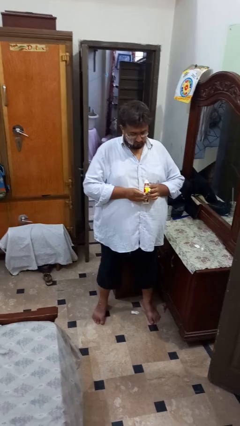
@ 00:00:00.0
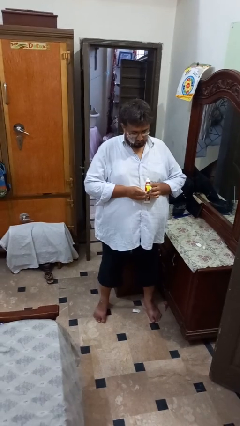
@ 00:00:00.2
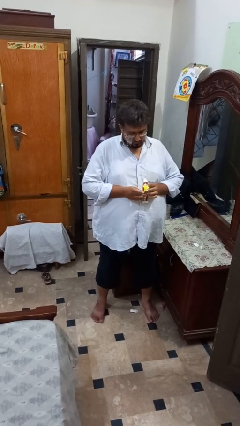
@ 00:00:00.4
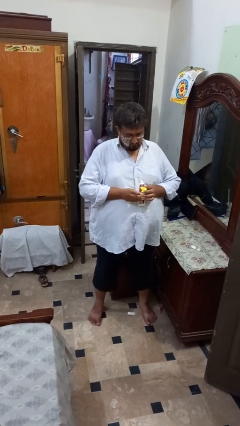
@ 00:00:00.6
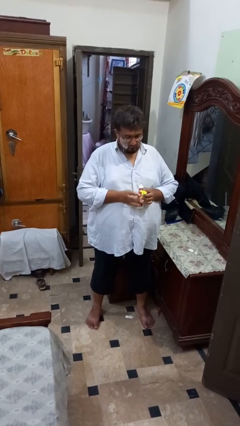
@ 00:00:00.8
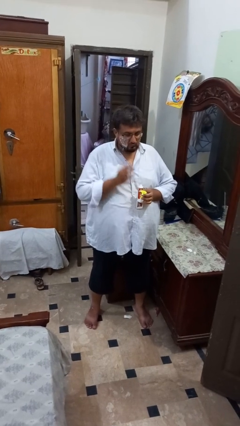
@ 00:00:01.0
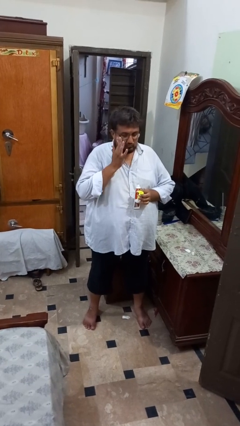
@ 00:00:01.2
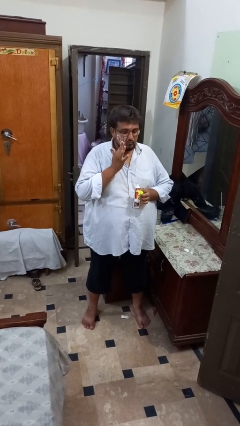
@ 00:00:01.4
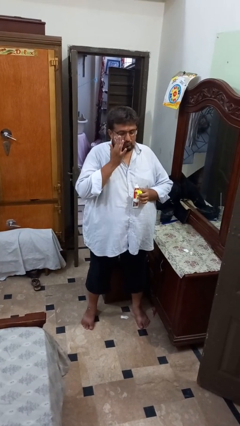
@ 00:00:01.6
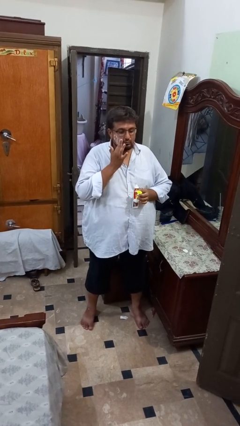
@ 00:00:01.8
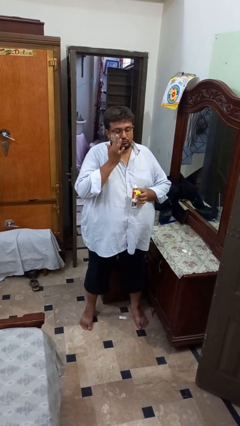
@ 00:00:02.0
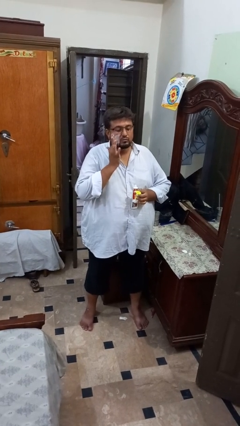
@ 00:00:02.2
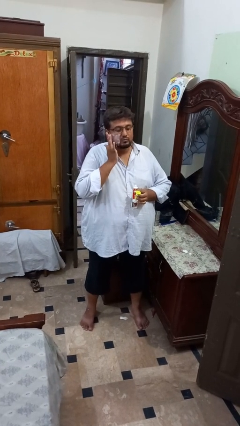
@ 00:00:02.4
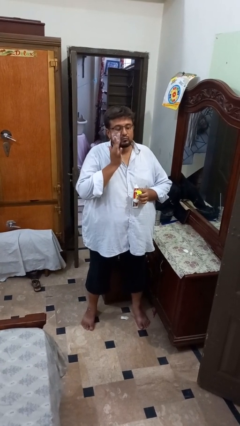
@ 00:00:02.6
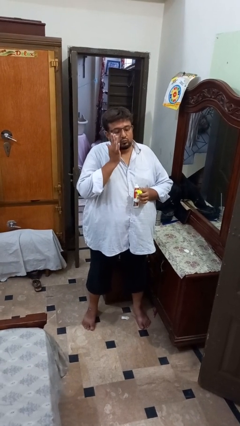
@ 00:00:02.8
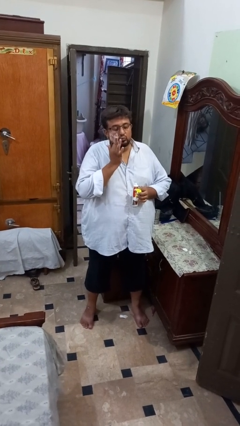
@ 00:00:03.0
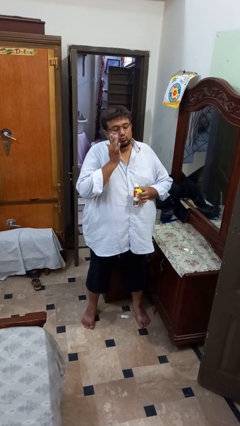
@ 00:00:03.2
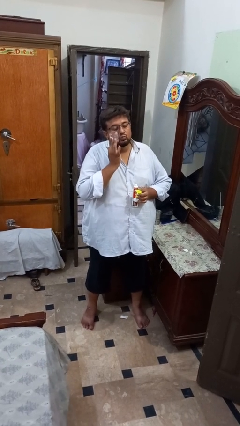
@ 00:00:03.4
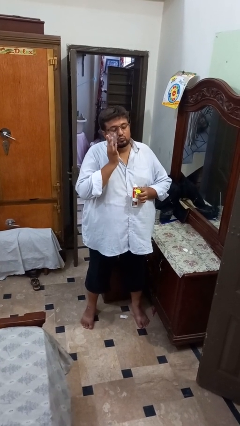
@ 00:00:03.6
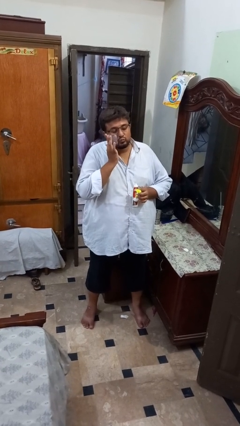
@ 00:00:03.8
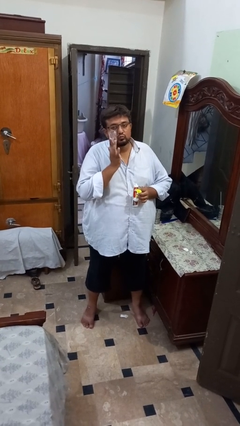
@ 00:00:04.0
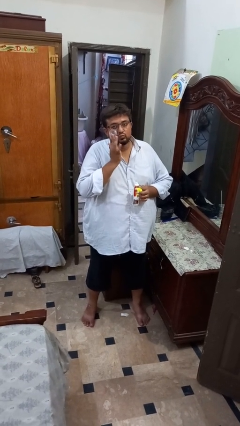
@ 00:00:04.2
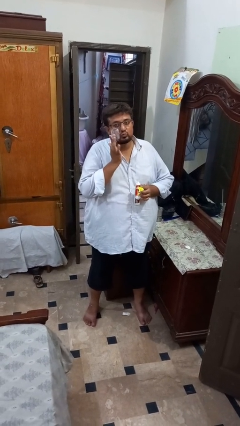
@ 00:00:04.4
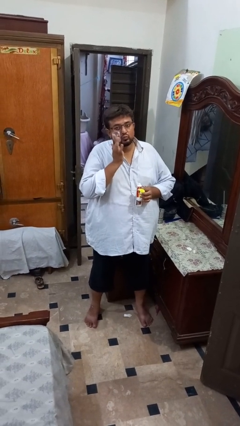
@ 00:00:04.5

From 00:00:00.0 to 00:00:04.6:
person applies shaving cream

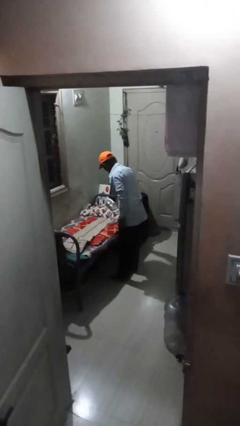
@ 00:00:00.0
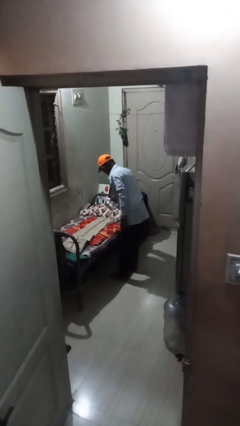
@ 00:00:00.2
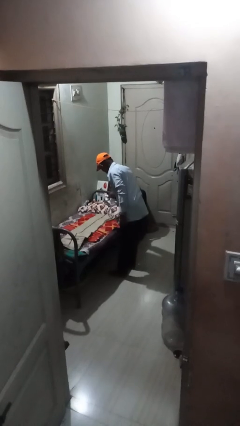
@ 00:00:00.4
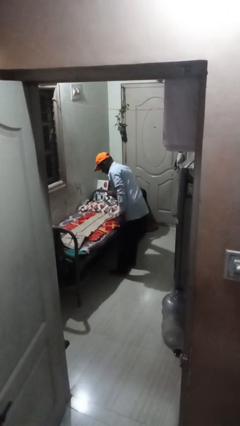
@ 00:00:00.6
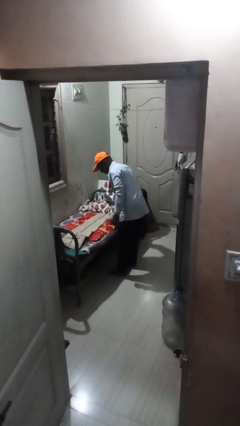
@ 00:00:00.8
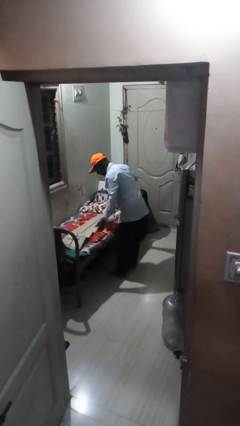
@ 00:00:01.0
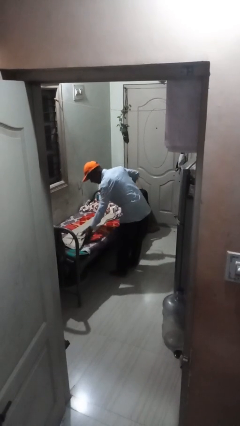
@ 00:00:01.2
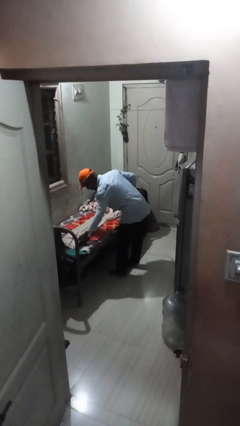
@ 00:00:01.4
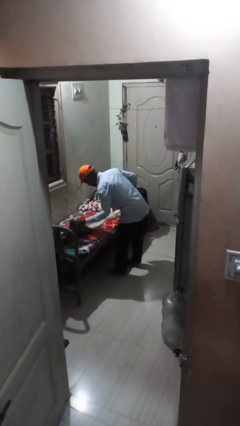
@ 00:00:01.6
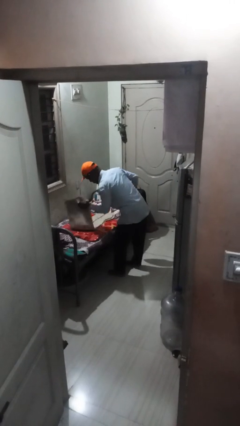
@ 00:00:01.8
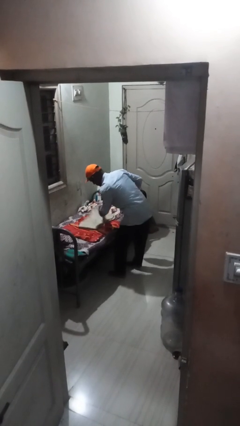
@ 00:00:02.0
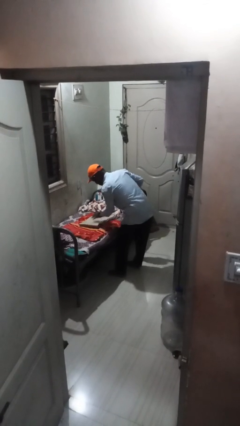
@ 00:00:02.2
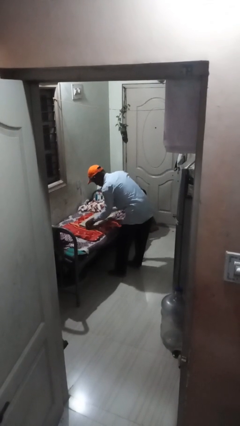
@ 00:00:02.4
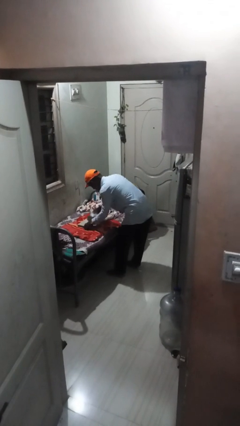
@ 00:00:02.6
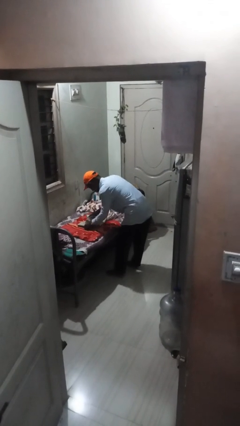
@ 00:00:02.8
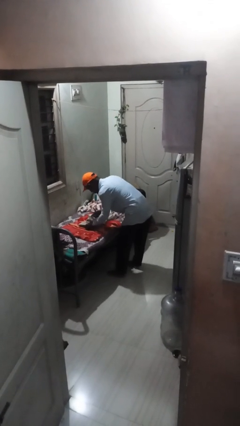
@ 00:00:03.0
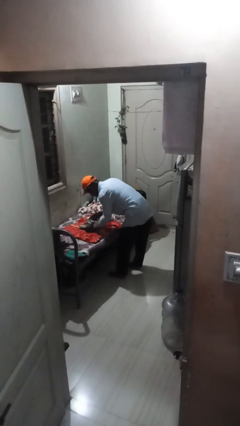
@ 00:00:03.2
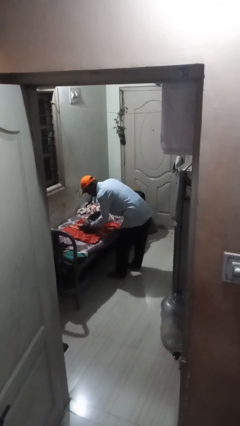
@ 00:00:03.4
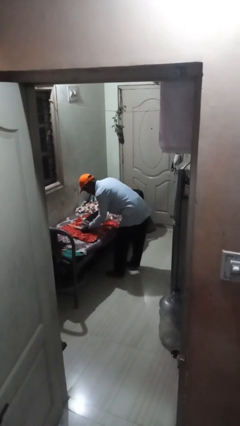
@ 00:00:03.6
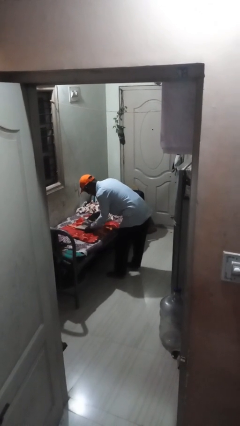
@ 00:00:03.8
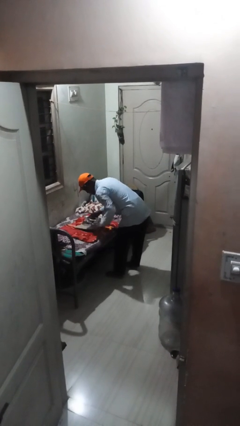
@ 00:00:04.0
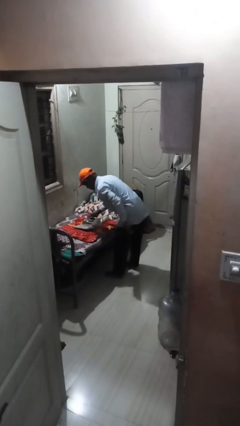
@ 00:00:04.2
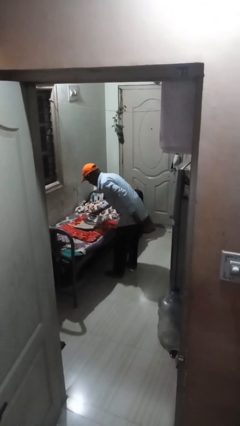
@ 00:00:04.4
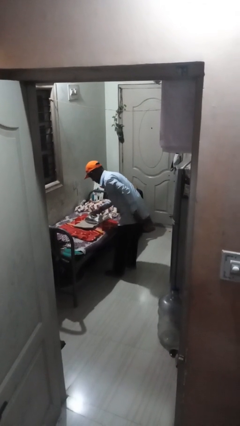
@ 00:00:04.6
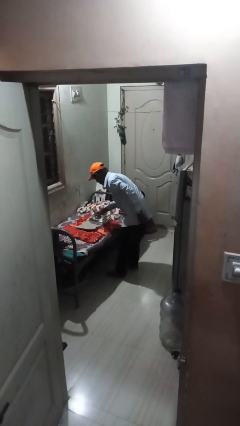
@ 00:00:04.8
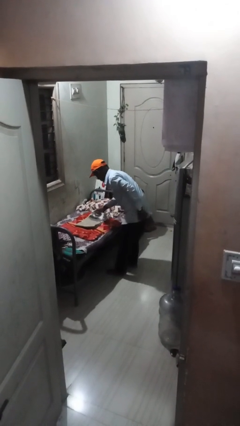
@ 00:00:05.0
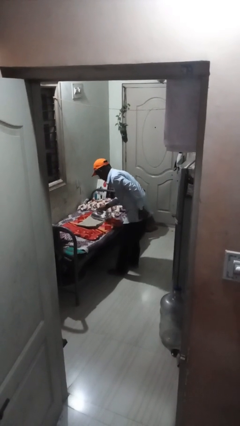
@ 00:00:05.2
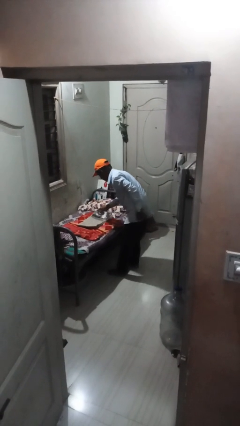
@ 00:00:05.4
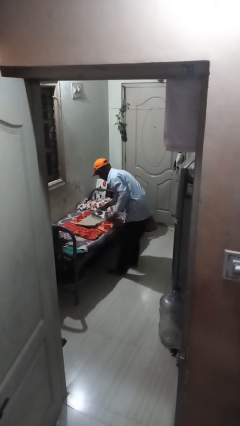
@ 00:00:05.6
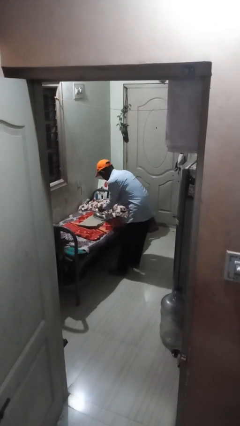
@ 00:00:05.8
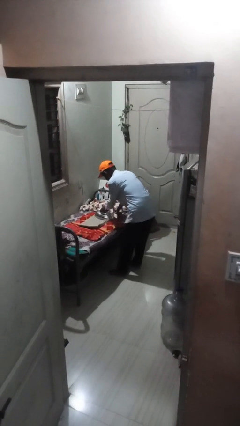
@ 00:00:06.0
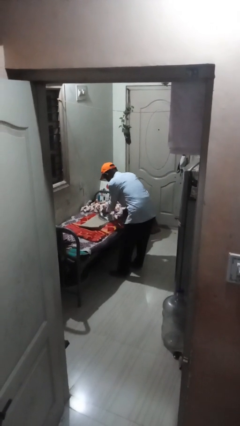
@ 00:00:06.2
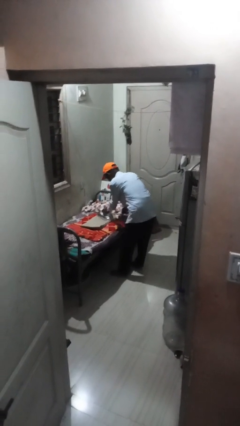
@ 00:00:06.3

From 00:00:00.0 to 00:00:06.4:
person irons clothes

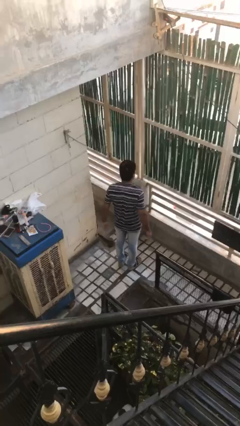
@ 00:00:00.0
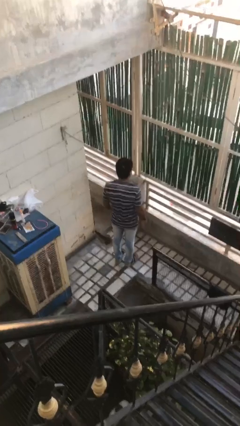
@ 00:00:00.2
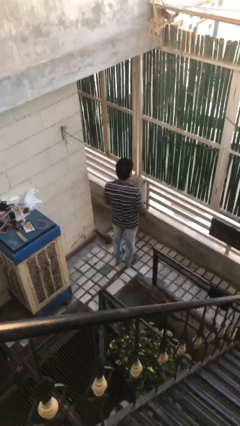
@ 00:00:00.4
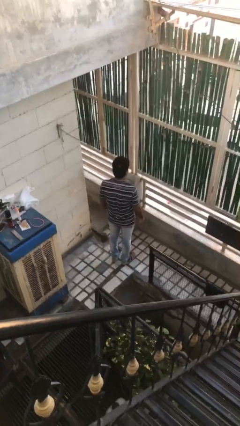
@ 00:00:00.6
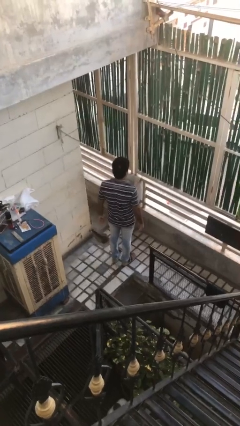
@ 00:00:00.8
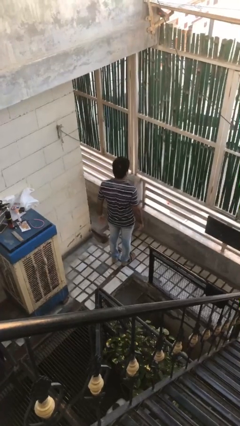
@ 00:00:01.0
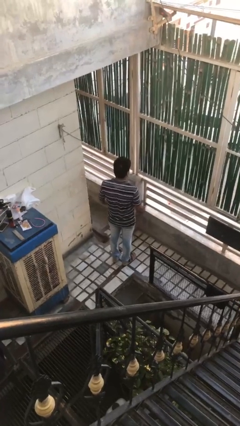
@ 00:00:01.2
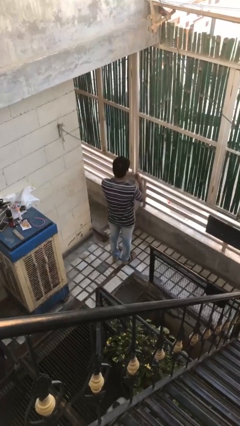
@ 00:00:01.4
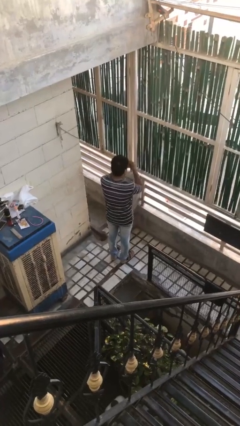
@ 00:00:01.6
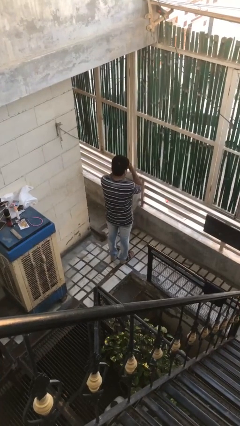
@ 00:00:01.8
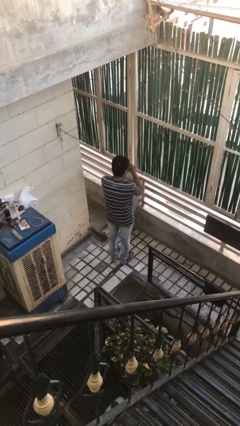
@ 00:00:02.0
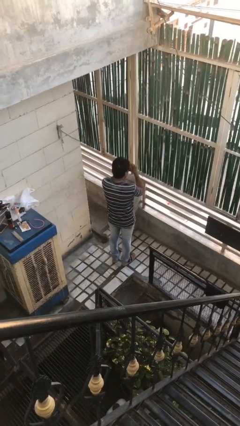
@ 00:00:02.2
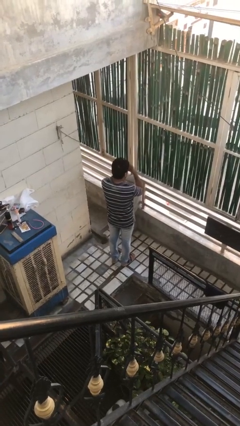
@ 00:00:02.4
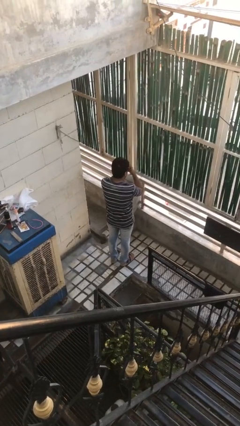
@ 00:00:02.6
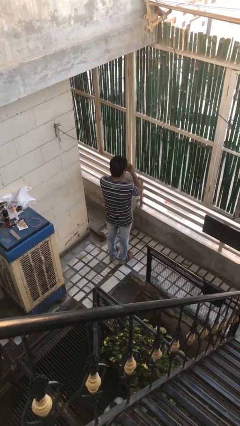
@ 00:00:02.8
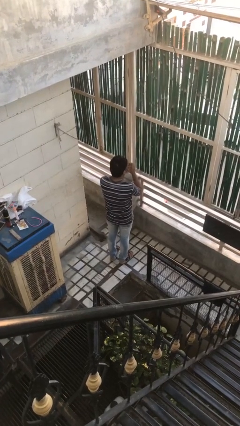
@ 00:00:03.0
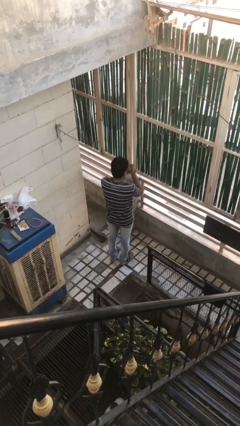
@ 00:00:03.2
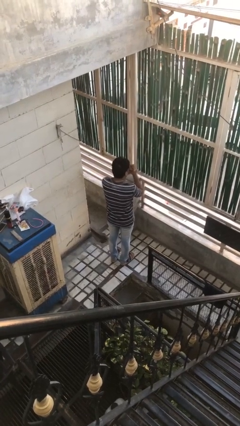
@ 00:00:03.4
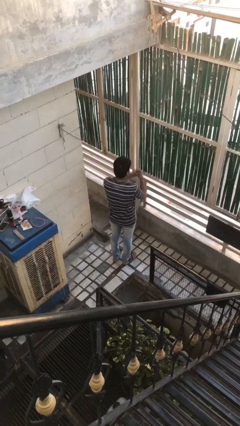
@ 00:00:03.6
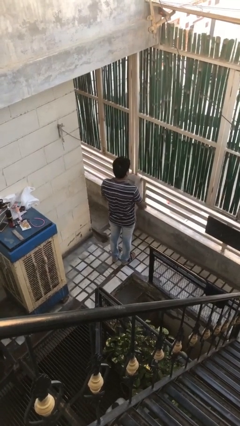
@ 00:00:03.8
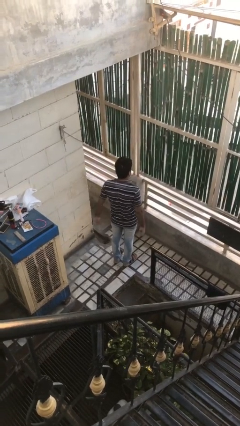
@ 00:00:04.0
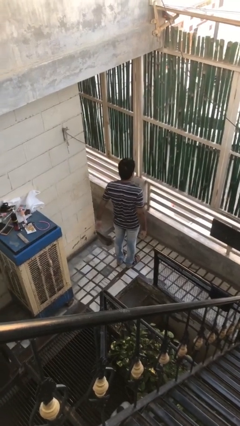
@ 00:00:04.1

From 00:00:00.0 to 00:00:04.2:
person snaps fingers

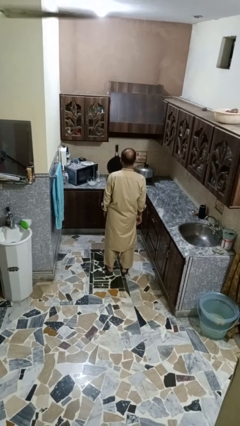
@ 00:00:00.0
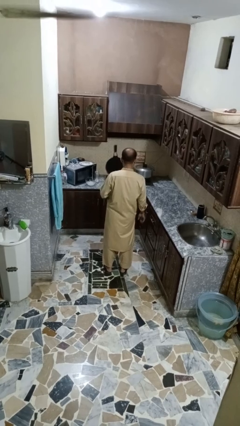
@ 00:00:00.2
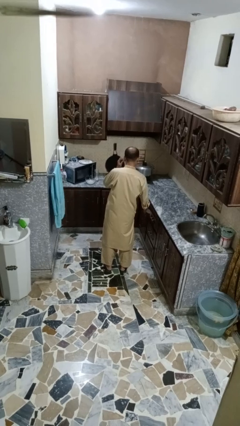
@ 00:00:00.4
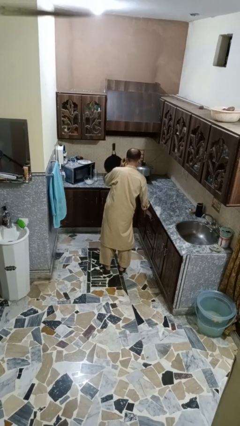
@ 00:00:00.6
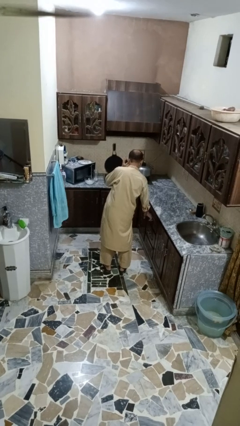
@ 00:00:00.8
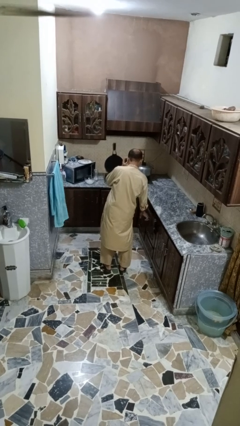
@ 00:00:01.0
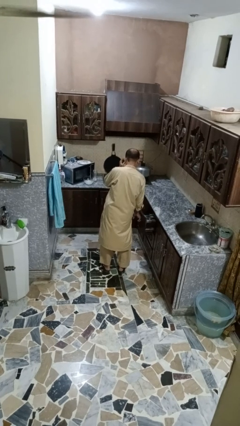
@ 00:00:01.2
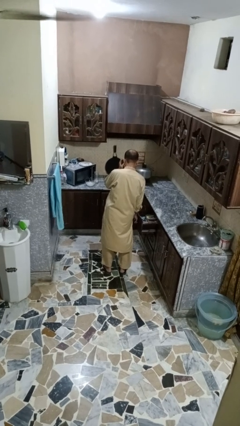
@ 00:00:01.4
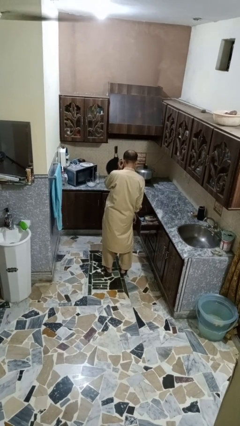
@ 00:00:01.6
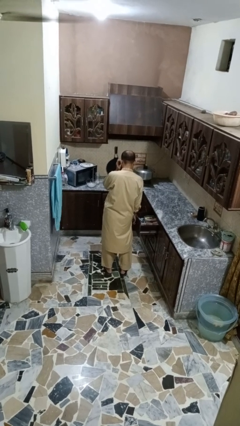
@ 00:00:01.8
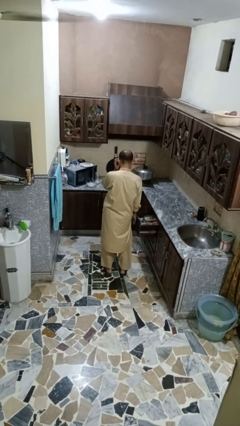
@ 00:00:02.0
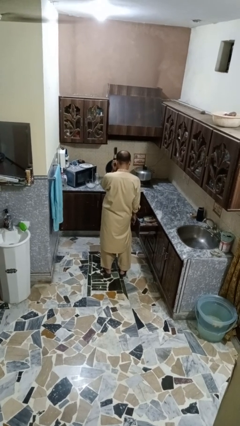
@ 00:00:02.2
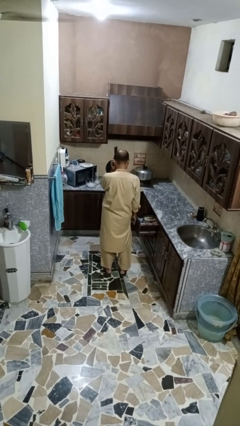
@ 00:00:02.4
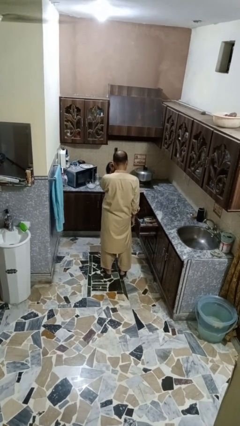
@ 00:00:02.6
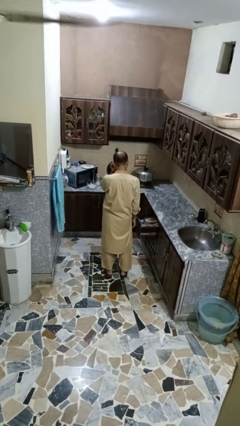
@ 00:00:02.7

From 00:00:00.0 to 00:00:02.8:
person opens kitchen drawer
